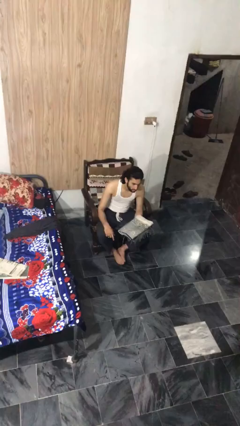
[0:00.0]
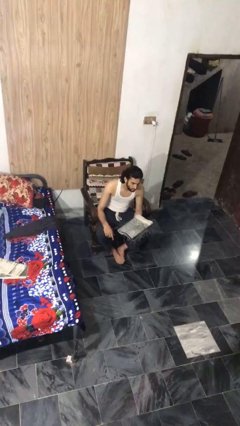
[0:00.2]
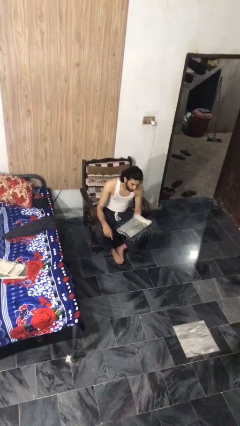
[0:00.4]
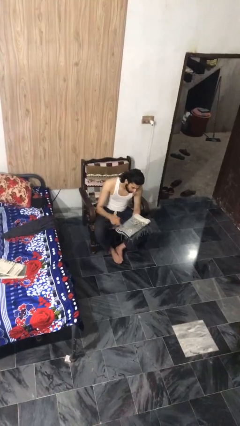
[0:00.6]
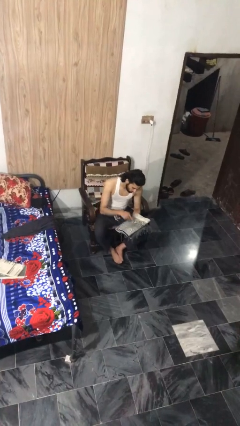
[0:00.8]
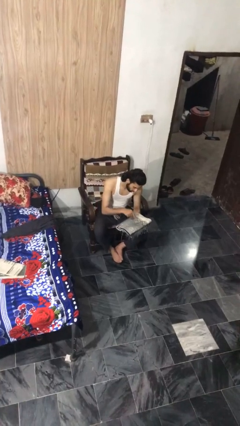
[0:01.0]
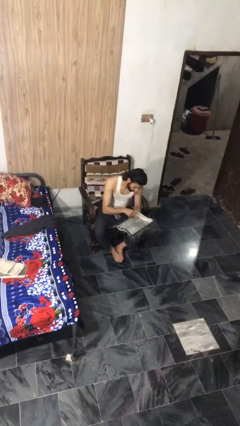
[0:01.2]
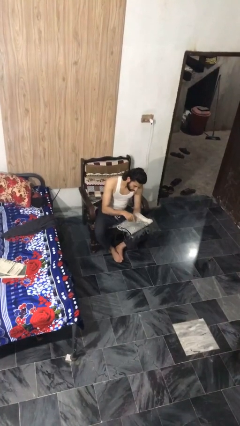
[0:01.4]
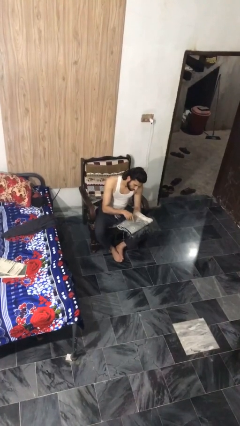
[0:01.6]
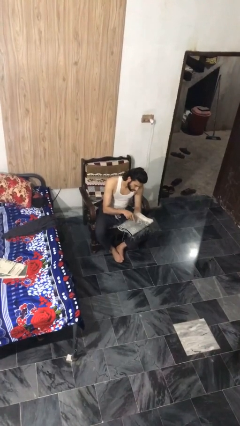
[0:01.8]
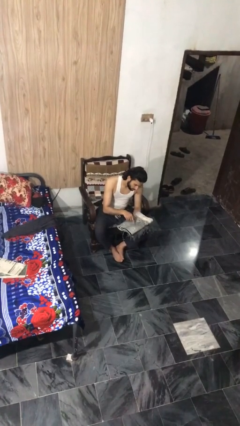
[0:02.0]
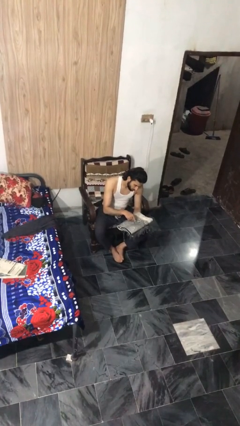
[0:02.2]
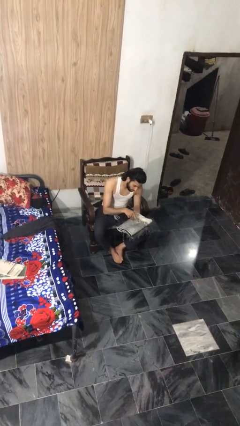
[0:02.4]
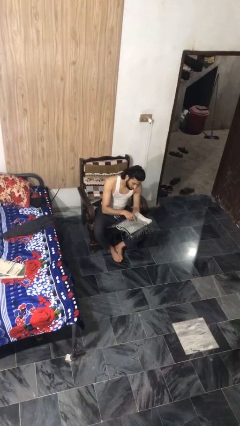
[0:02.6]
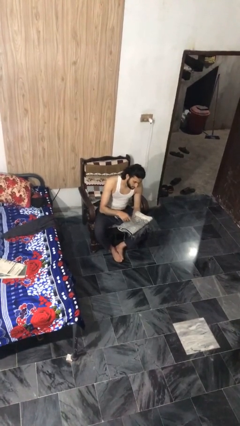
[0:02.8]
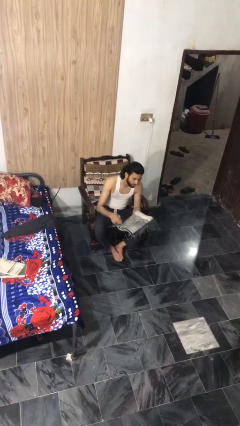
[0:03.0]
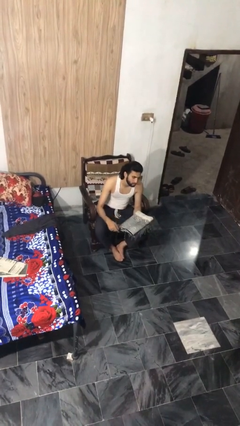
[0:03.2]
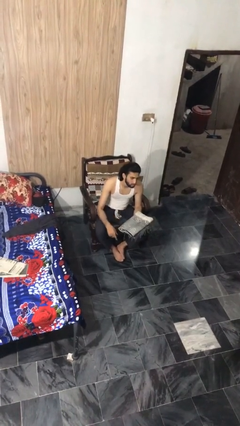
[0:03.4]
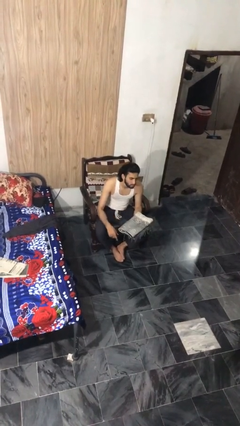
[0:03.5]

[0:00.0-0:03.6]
person taps object with finger

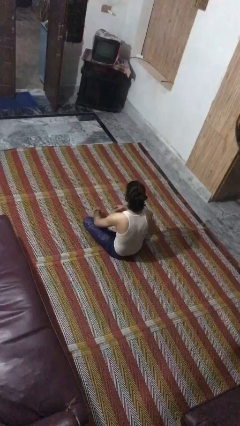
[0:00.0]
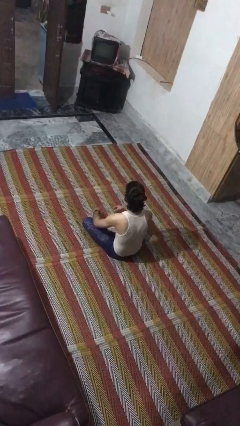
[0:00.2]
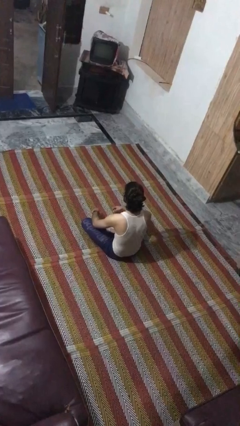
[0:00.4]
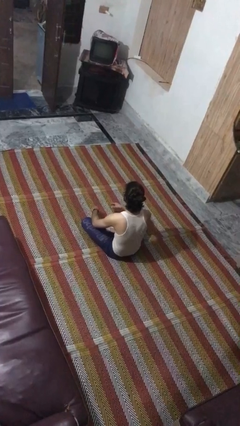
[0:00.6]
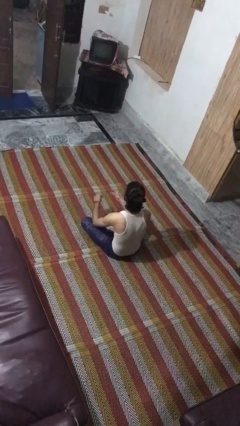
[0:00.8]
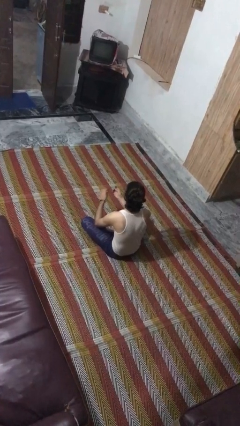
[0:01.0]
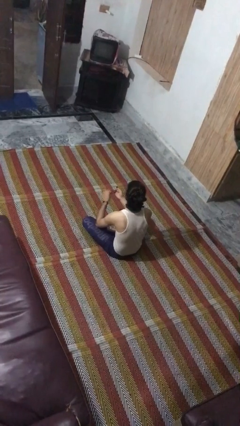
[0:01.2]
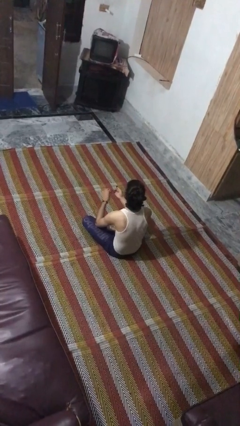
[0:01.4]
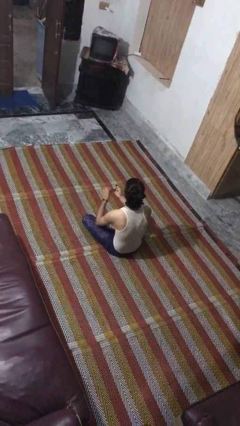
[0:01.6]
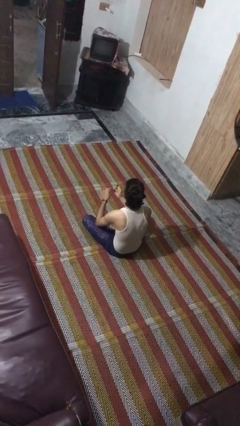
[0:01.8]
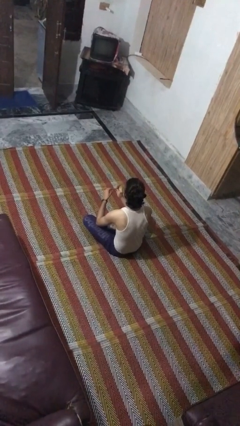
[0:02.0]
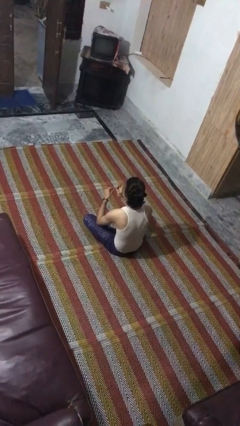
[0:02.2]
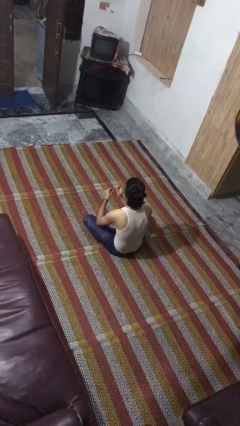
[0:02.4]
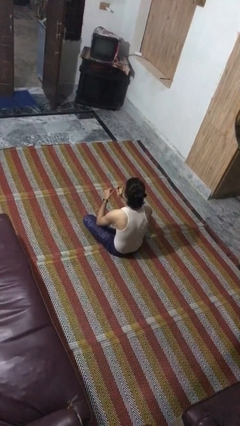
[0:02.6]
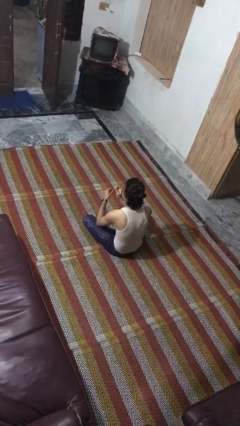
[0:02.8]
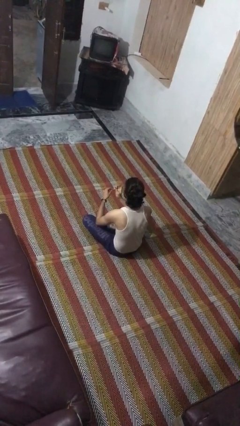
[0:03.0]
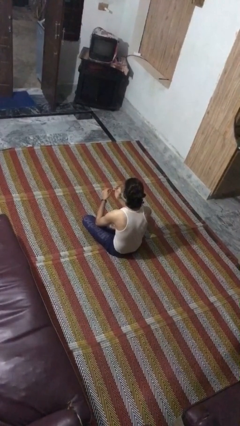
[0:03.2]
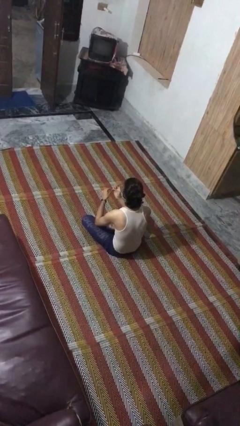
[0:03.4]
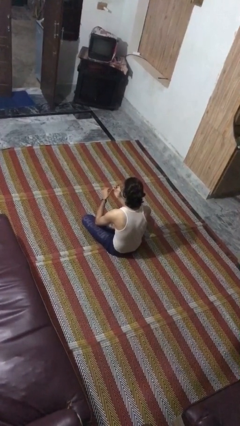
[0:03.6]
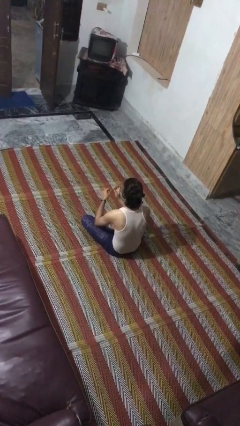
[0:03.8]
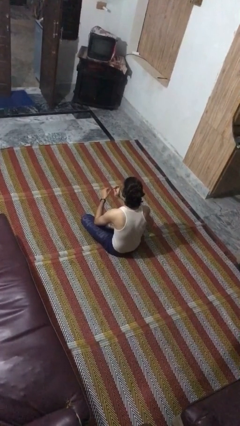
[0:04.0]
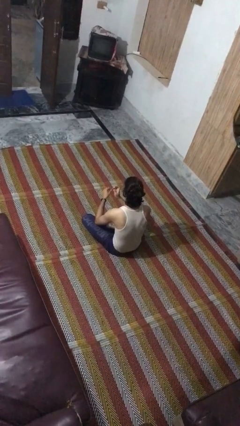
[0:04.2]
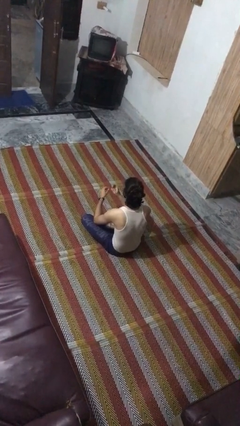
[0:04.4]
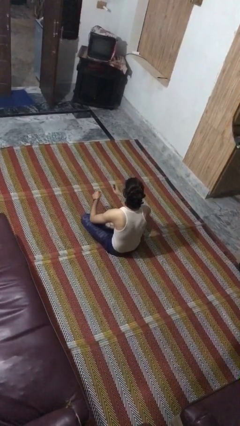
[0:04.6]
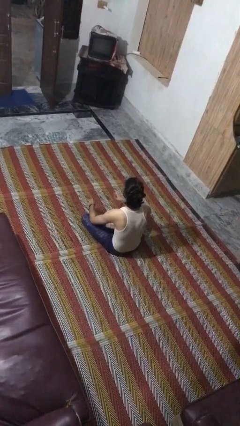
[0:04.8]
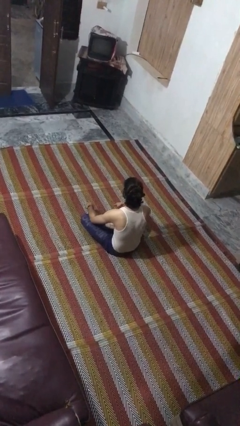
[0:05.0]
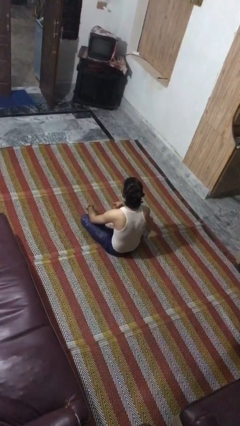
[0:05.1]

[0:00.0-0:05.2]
person files fingernails

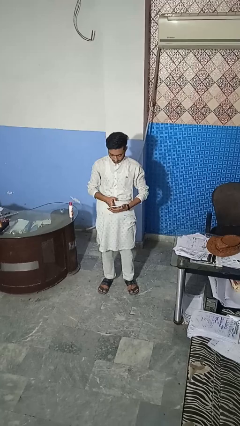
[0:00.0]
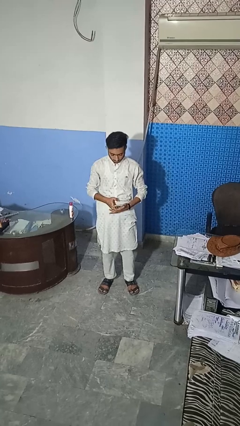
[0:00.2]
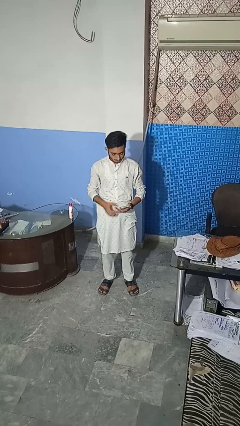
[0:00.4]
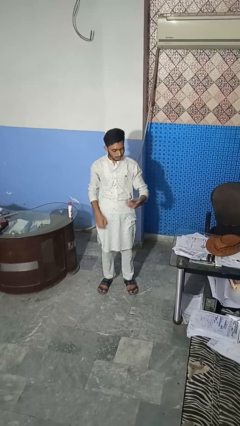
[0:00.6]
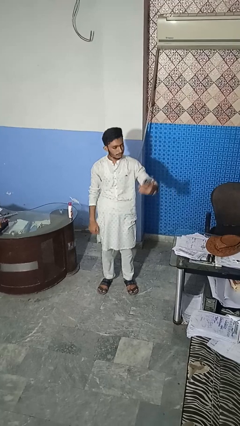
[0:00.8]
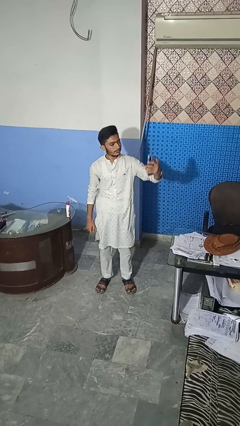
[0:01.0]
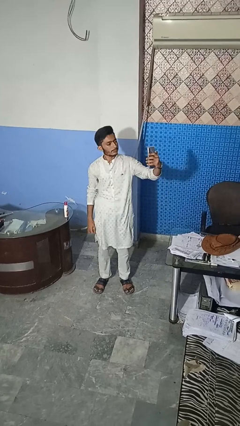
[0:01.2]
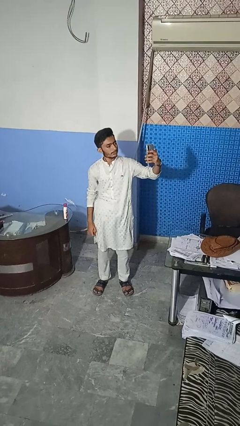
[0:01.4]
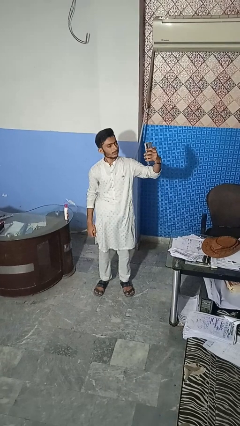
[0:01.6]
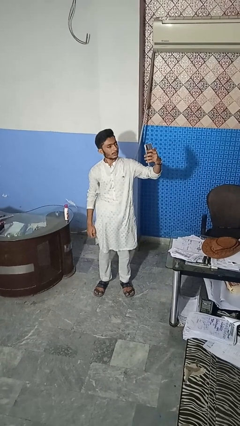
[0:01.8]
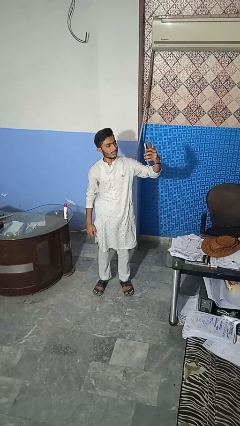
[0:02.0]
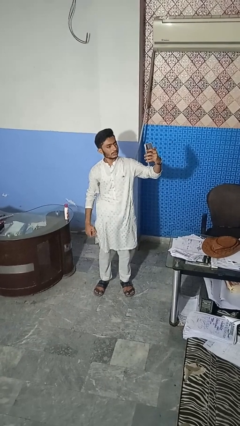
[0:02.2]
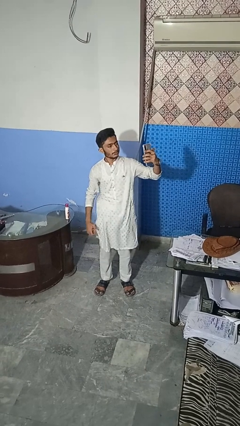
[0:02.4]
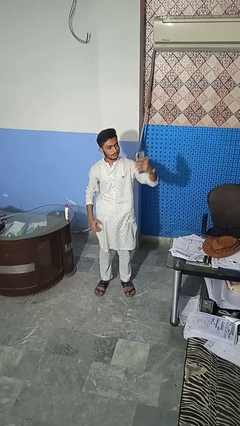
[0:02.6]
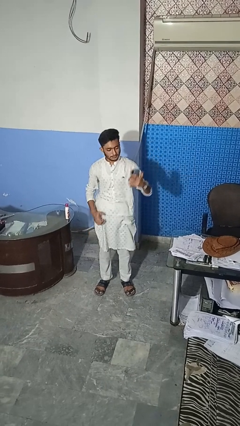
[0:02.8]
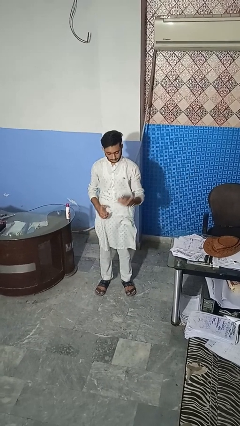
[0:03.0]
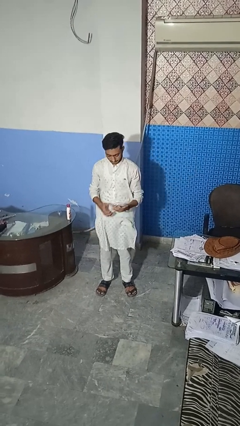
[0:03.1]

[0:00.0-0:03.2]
person takes selfie

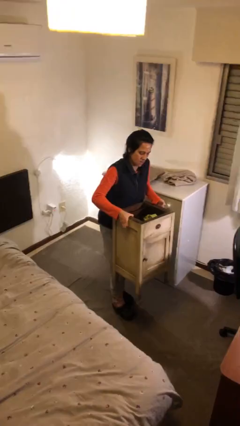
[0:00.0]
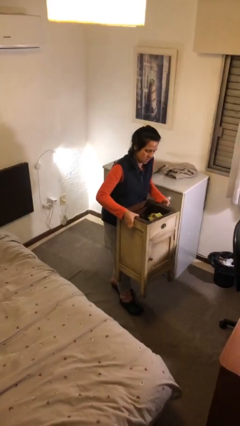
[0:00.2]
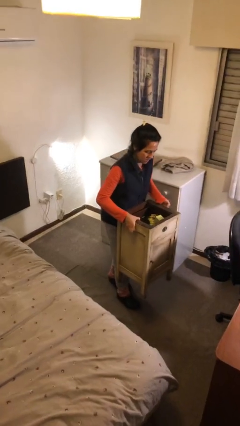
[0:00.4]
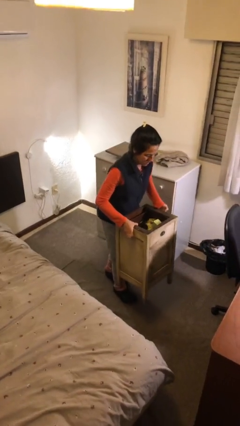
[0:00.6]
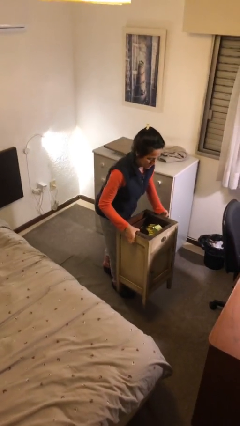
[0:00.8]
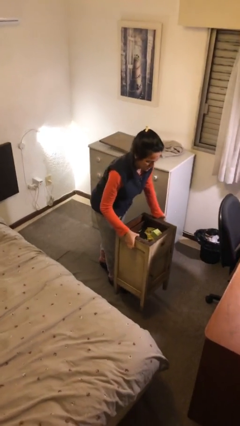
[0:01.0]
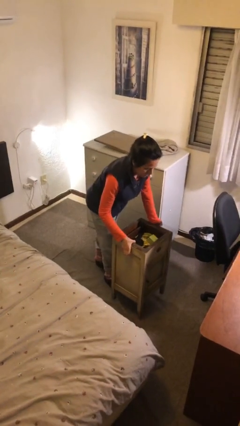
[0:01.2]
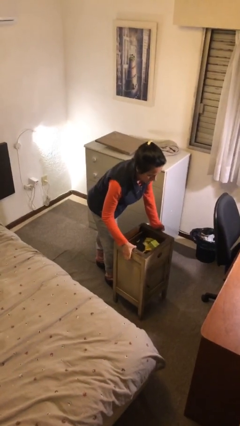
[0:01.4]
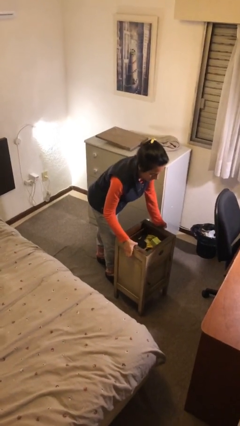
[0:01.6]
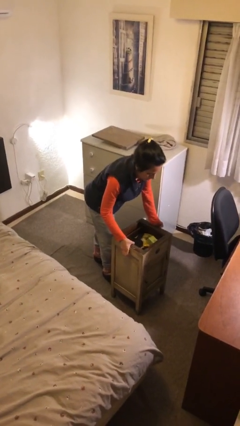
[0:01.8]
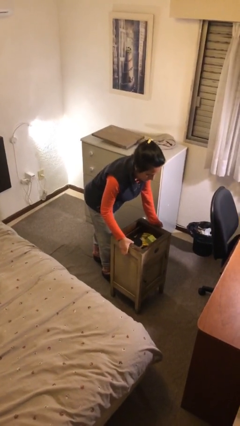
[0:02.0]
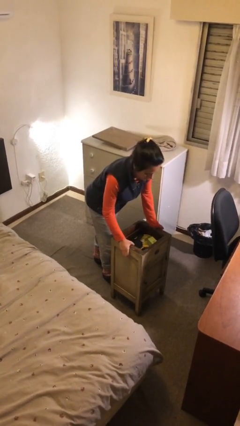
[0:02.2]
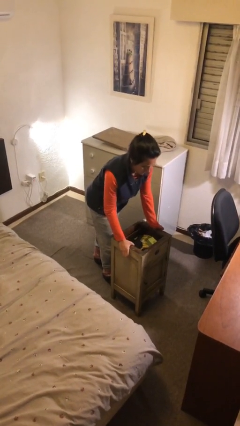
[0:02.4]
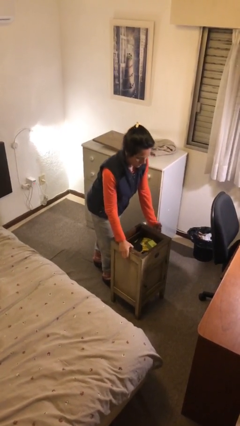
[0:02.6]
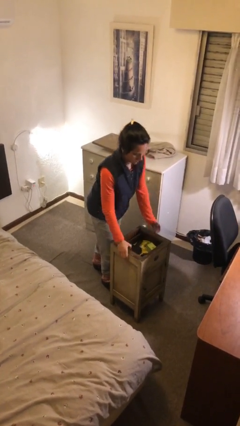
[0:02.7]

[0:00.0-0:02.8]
person puts down object on floor

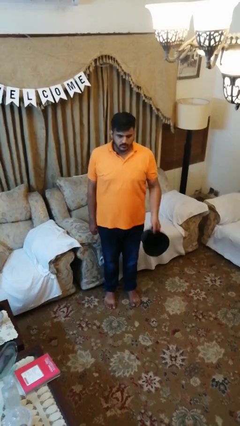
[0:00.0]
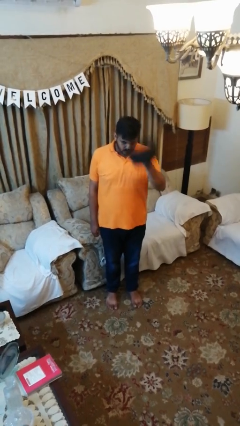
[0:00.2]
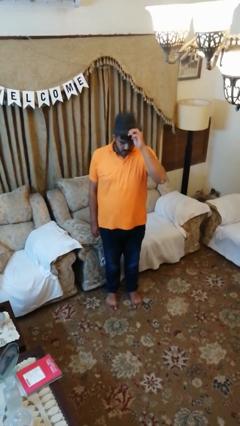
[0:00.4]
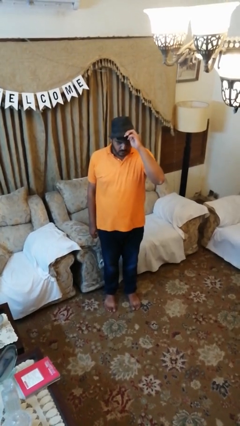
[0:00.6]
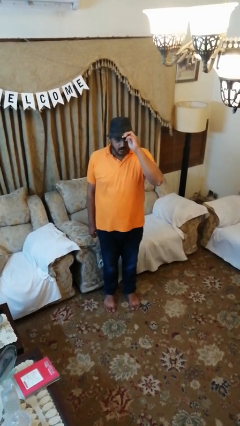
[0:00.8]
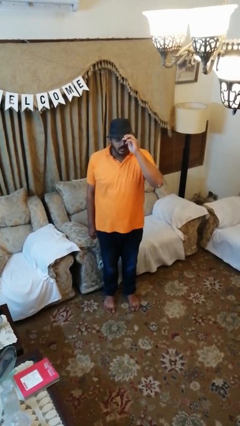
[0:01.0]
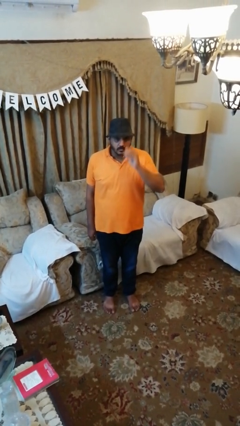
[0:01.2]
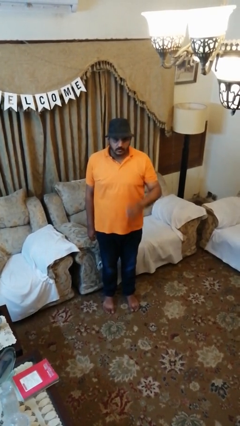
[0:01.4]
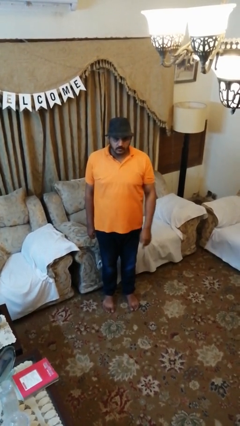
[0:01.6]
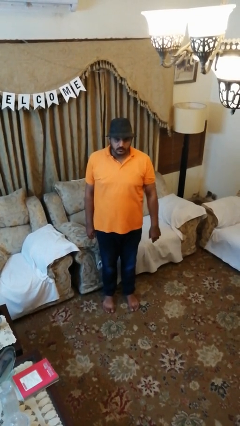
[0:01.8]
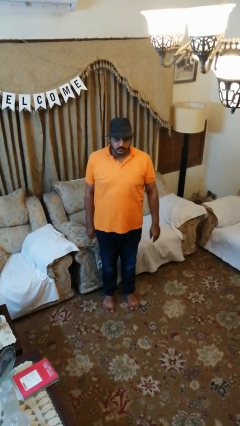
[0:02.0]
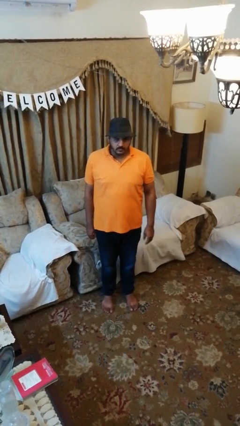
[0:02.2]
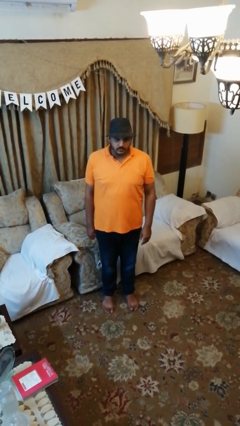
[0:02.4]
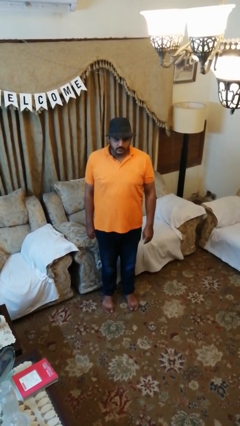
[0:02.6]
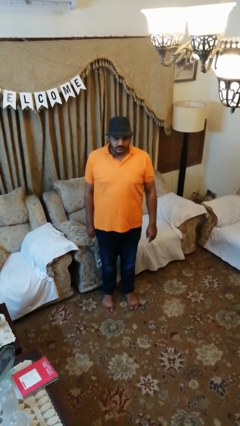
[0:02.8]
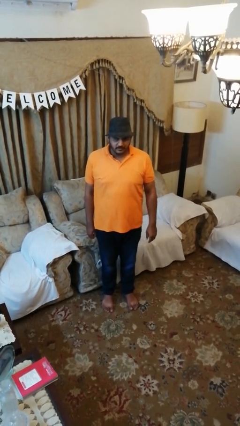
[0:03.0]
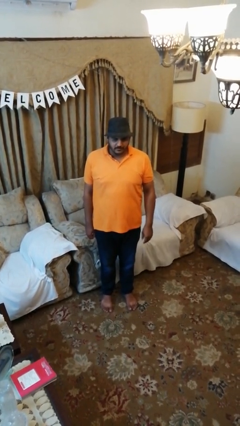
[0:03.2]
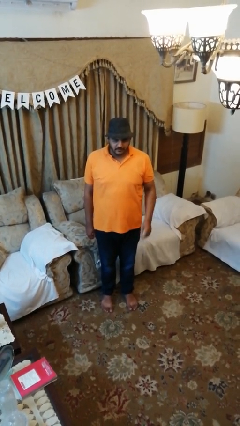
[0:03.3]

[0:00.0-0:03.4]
person puts on hat
